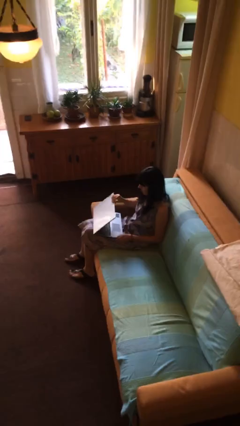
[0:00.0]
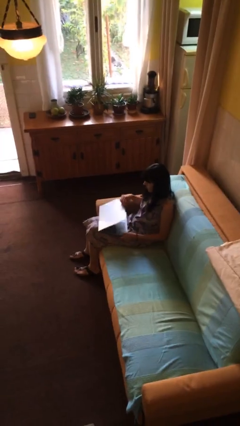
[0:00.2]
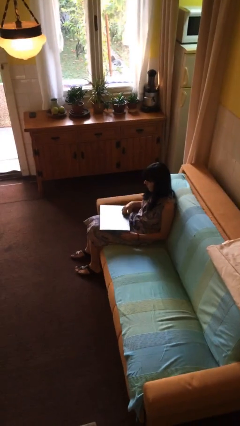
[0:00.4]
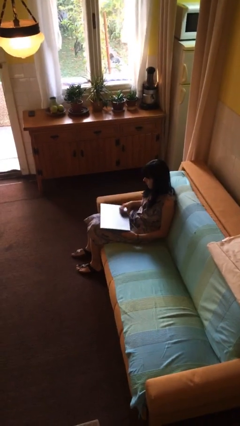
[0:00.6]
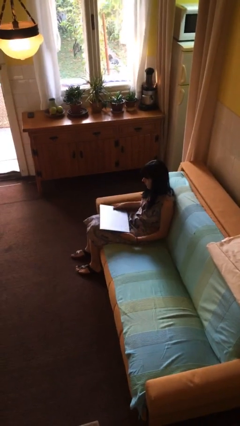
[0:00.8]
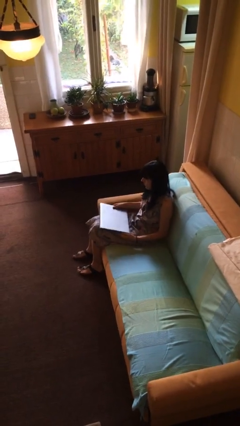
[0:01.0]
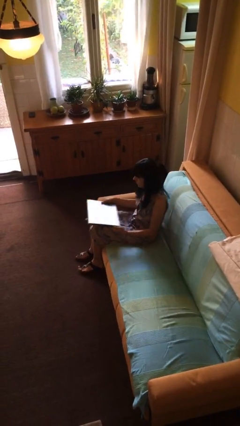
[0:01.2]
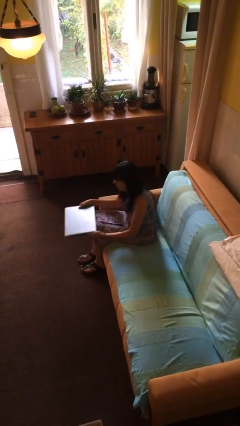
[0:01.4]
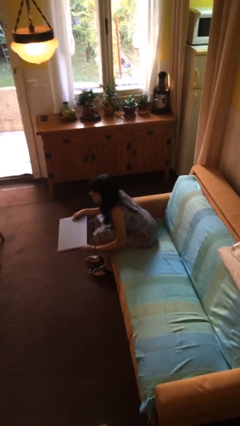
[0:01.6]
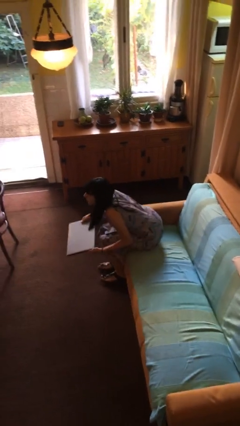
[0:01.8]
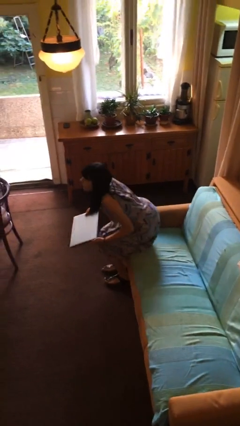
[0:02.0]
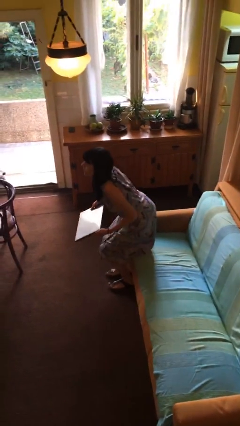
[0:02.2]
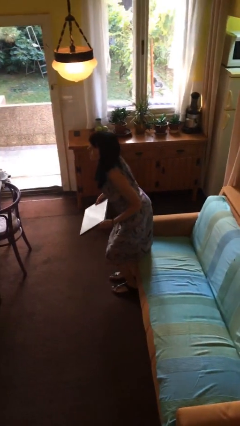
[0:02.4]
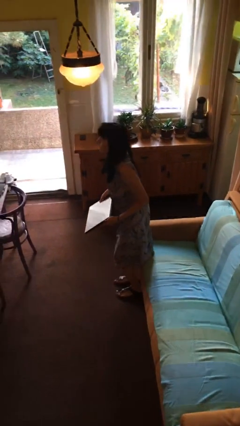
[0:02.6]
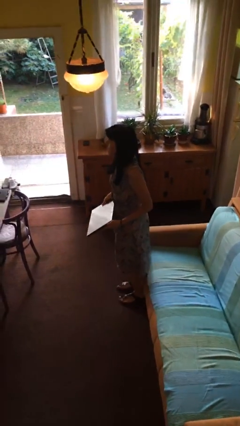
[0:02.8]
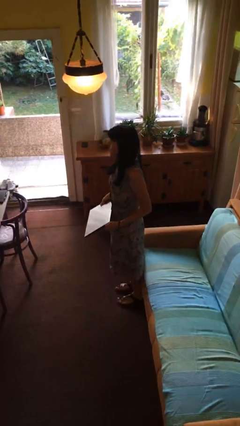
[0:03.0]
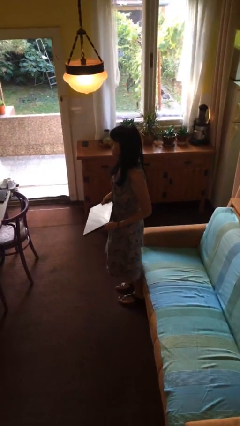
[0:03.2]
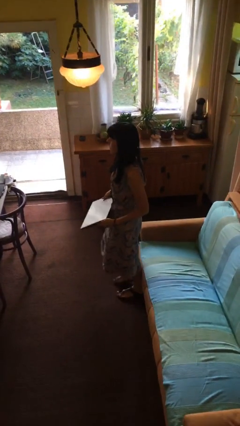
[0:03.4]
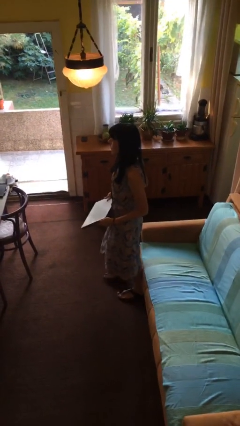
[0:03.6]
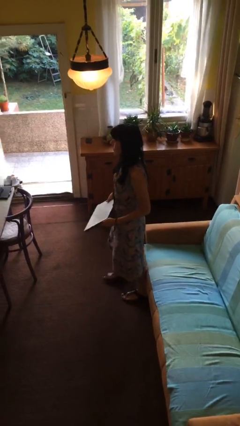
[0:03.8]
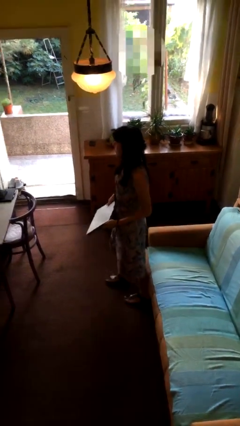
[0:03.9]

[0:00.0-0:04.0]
person stands up

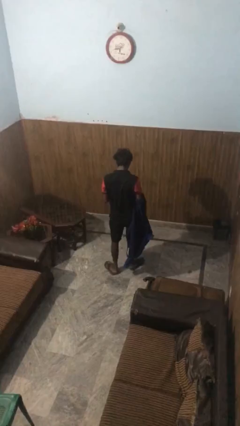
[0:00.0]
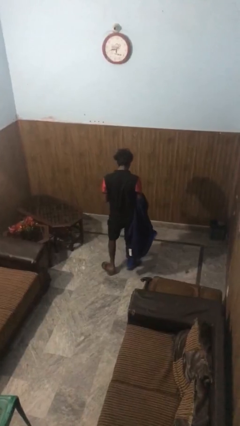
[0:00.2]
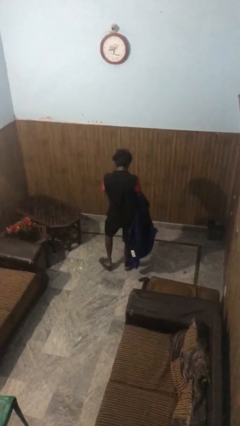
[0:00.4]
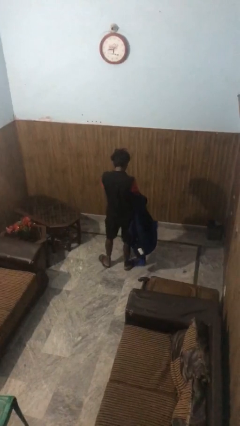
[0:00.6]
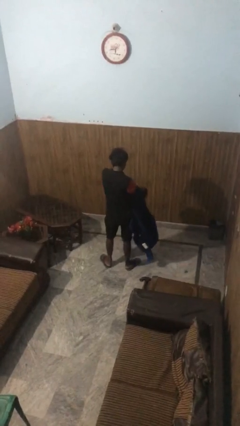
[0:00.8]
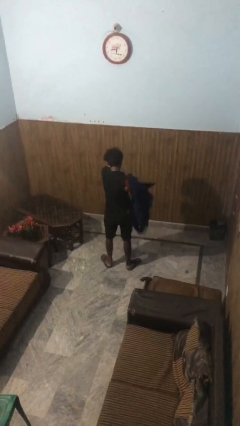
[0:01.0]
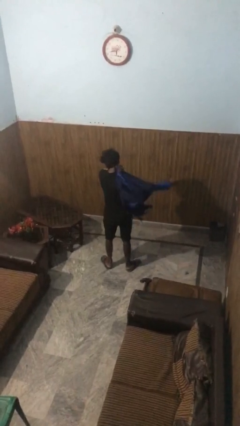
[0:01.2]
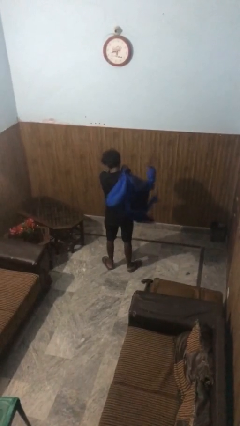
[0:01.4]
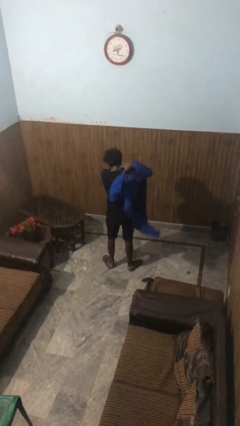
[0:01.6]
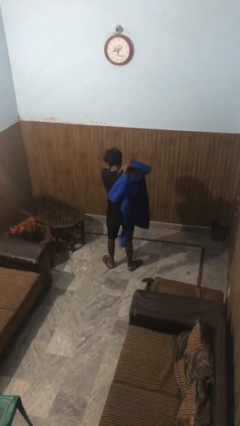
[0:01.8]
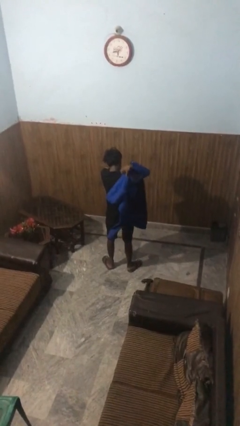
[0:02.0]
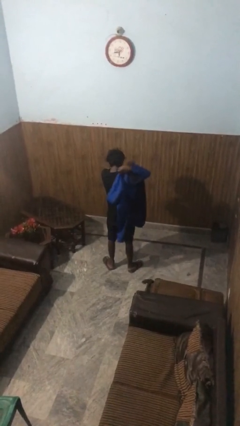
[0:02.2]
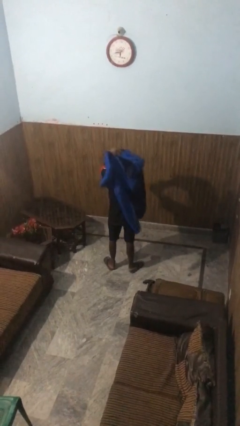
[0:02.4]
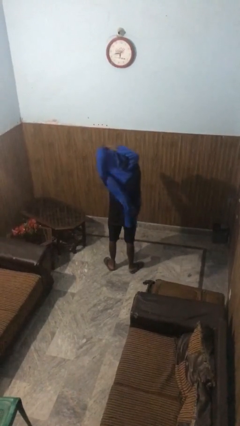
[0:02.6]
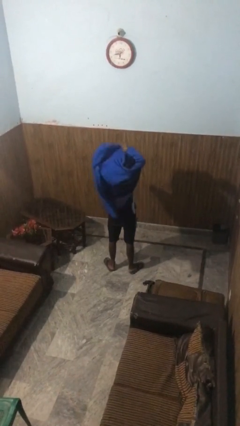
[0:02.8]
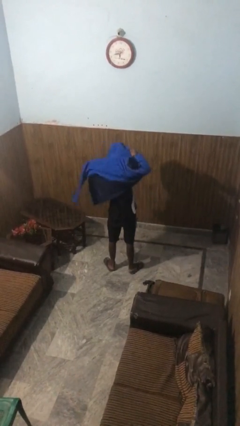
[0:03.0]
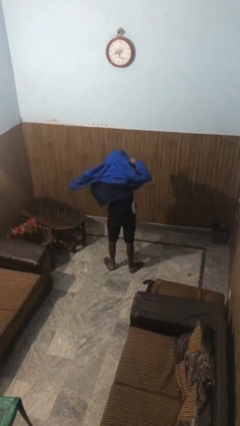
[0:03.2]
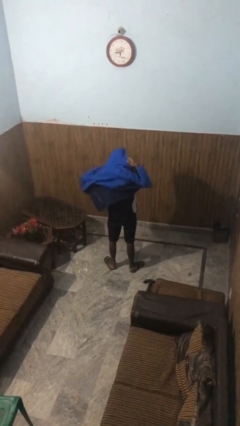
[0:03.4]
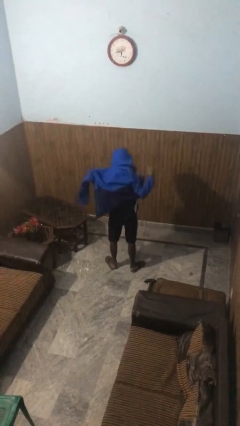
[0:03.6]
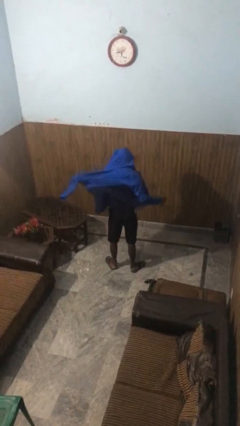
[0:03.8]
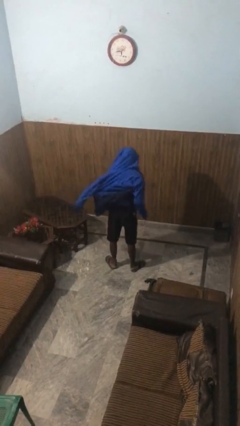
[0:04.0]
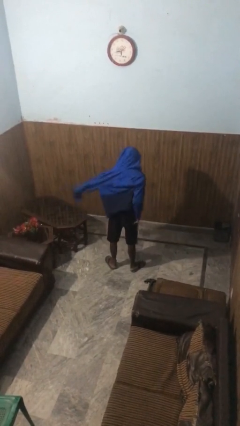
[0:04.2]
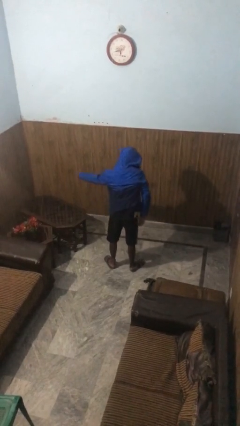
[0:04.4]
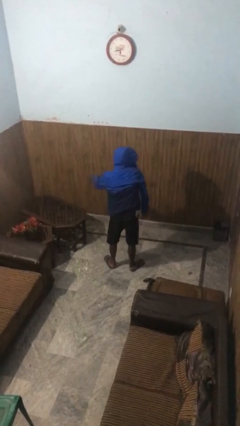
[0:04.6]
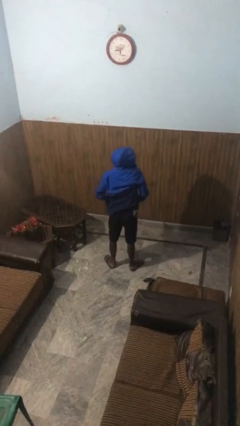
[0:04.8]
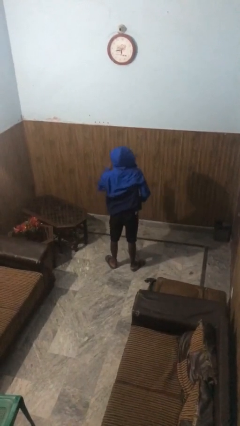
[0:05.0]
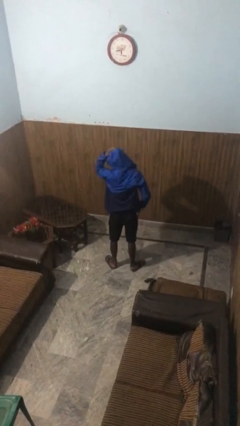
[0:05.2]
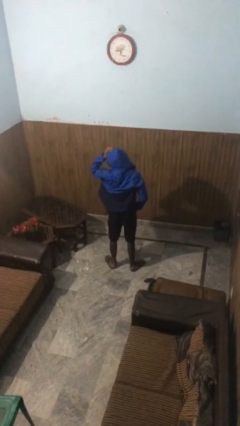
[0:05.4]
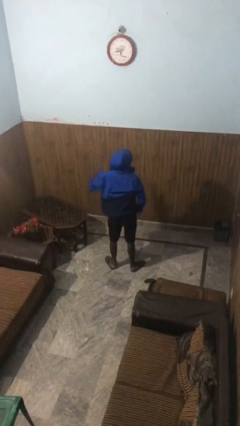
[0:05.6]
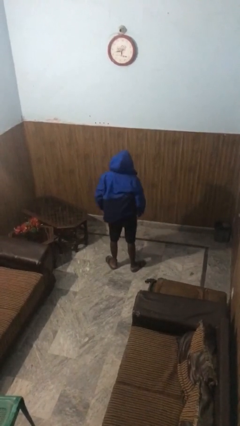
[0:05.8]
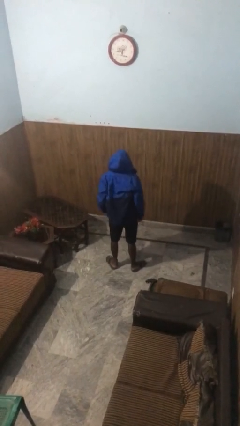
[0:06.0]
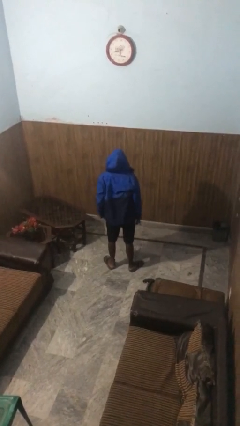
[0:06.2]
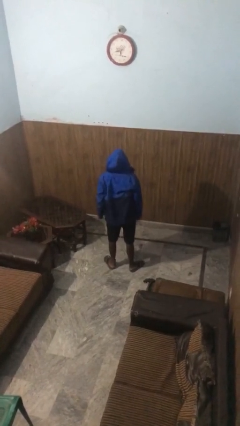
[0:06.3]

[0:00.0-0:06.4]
person puts on hoodie

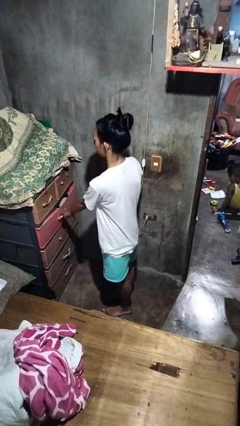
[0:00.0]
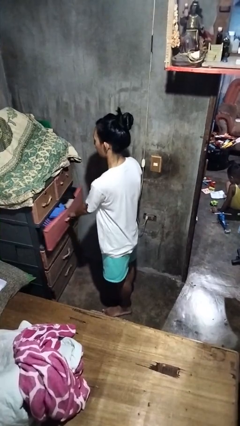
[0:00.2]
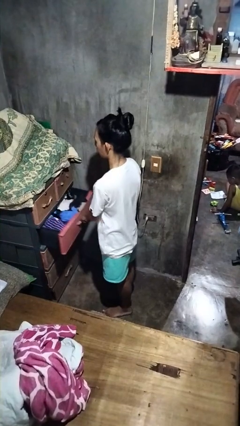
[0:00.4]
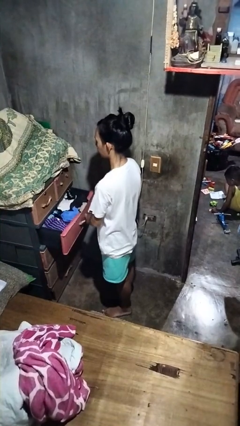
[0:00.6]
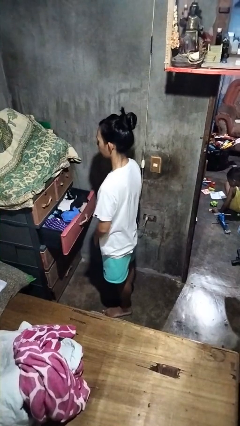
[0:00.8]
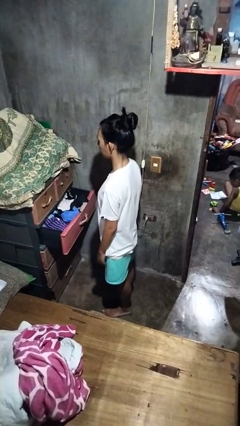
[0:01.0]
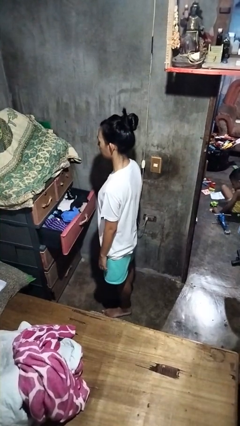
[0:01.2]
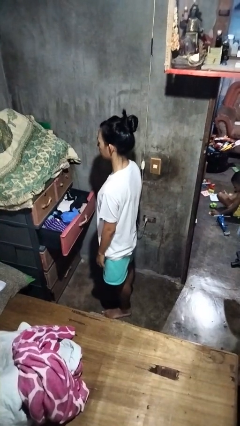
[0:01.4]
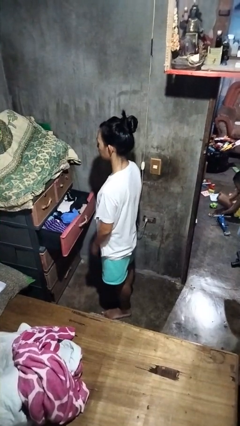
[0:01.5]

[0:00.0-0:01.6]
person opens dresser drawer

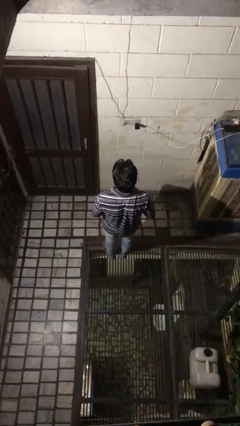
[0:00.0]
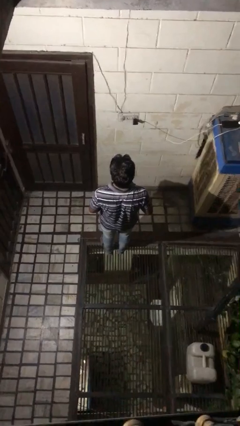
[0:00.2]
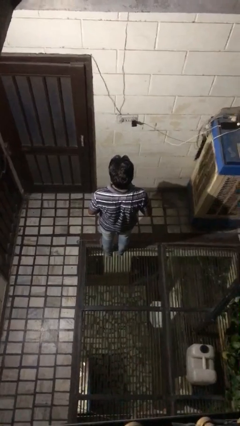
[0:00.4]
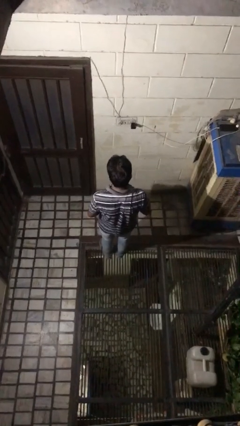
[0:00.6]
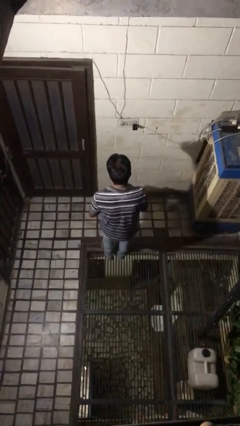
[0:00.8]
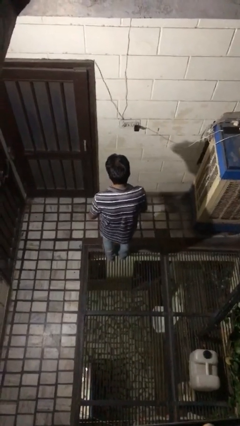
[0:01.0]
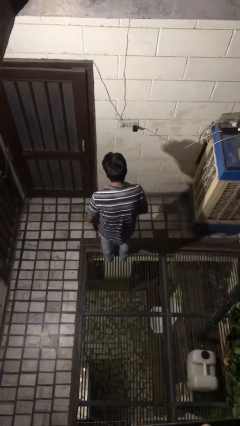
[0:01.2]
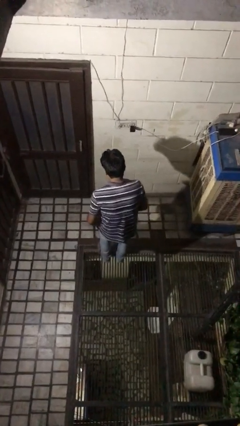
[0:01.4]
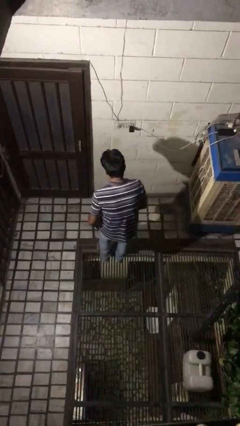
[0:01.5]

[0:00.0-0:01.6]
person throws object to ground

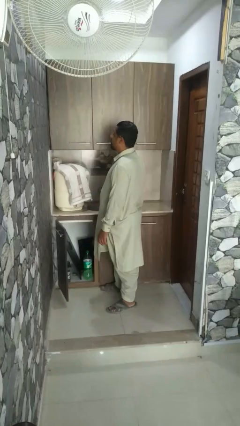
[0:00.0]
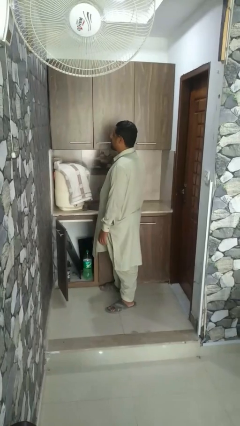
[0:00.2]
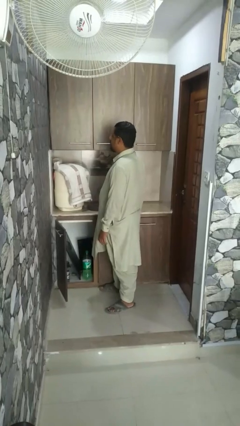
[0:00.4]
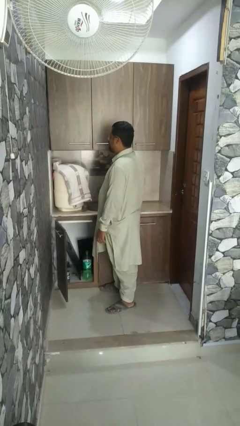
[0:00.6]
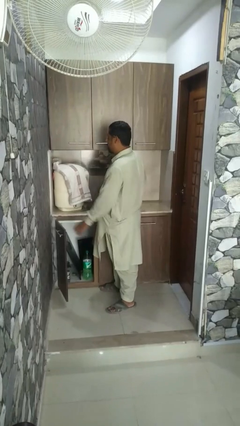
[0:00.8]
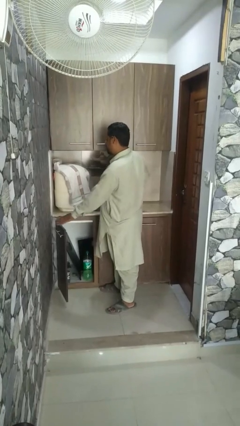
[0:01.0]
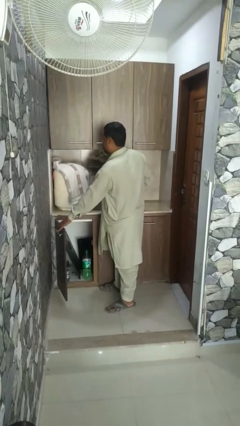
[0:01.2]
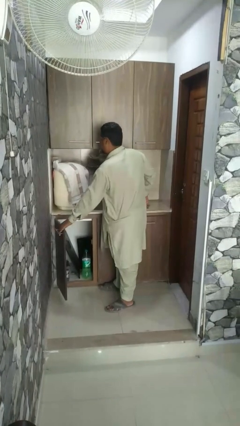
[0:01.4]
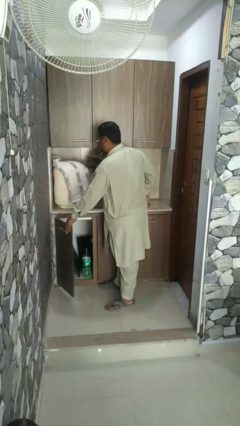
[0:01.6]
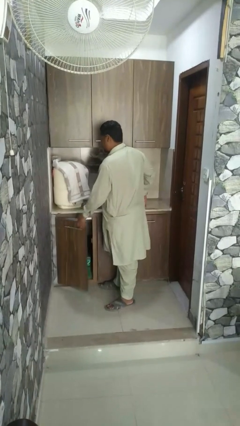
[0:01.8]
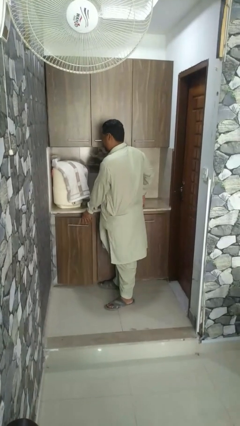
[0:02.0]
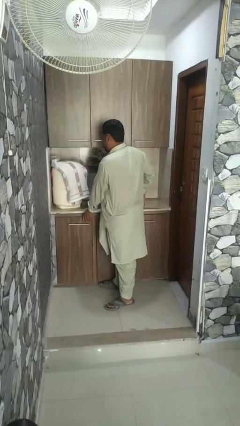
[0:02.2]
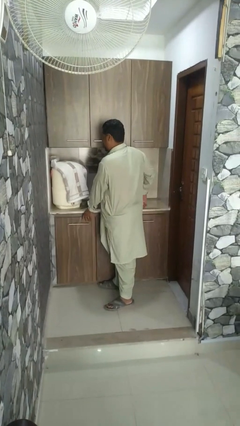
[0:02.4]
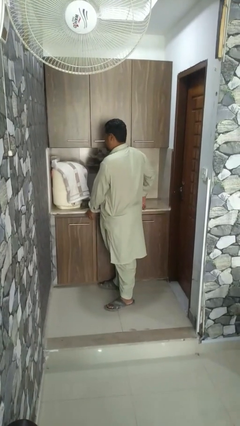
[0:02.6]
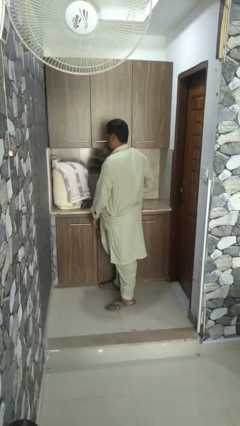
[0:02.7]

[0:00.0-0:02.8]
person closes refrigerator

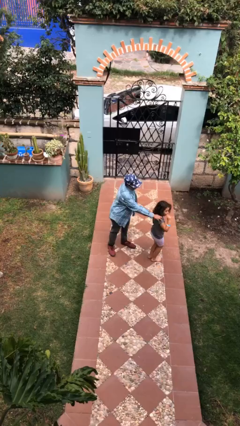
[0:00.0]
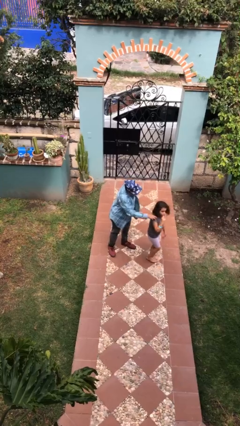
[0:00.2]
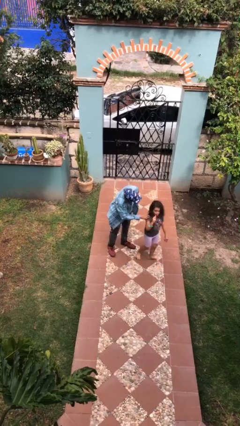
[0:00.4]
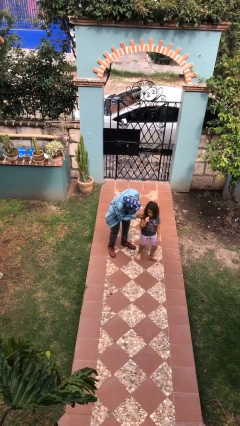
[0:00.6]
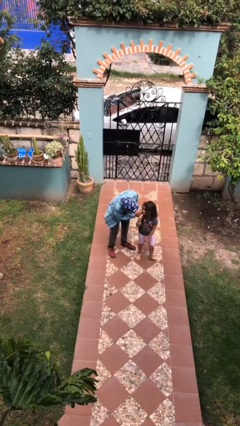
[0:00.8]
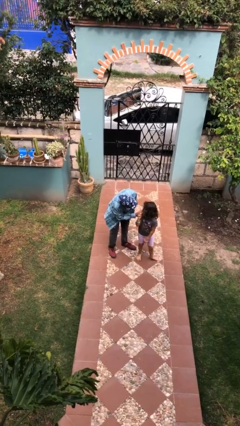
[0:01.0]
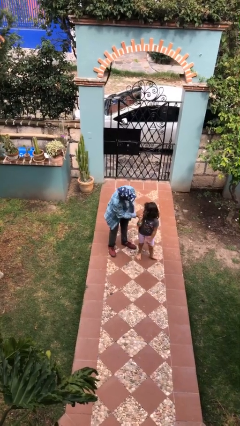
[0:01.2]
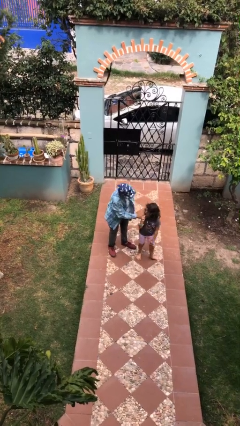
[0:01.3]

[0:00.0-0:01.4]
person spins person around
